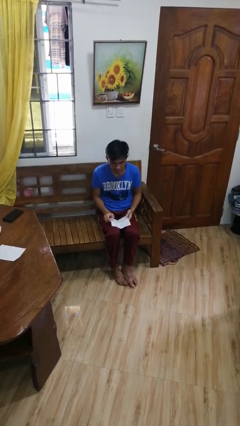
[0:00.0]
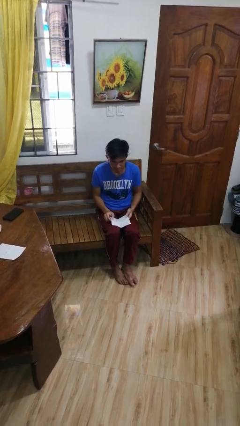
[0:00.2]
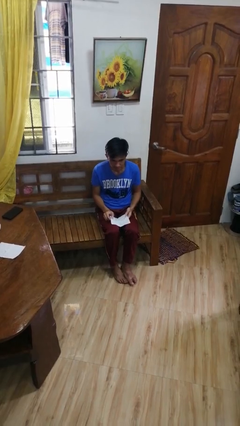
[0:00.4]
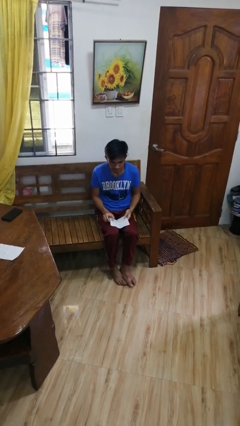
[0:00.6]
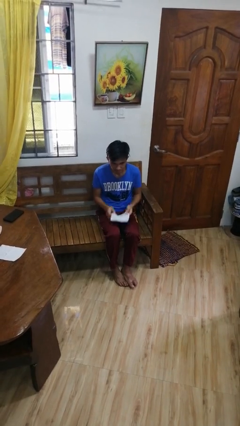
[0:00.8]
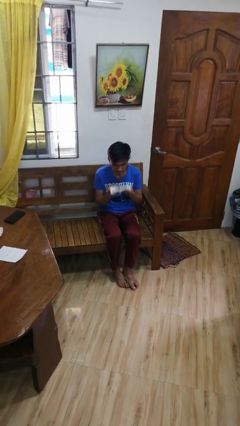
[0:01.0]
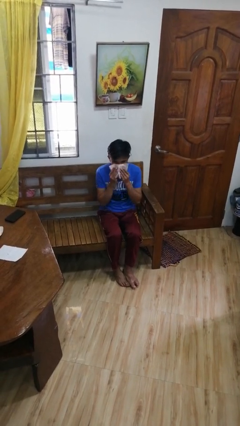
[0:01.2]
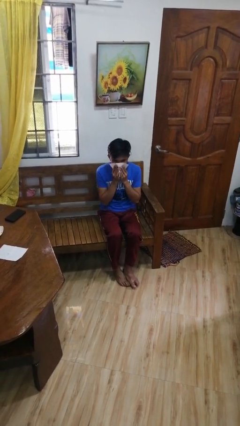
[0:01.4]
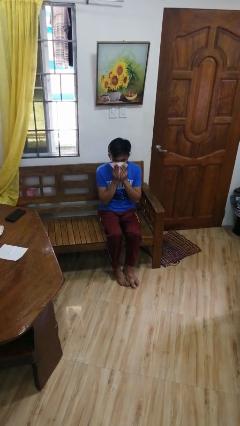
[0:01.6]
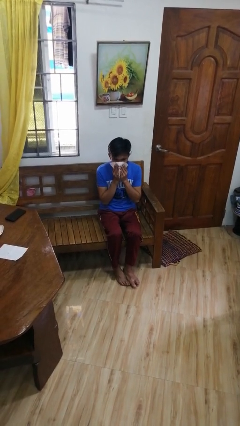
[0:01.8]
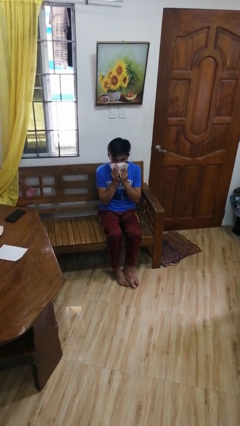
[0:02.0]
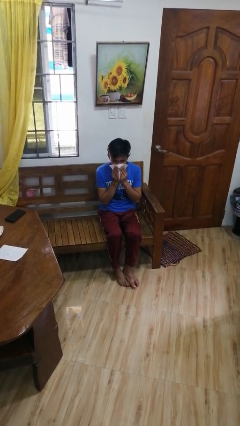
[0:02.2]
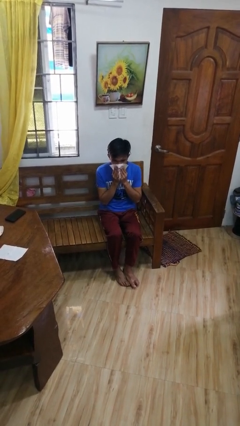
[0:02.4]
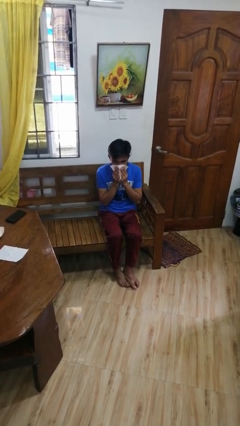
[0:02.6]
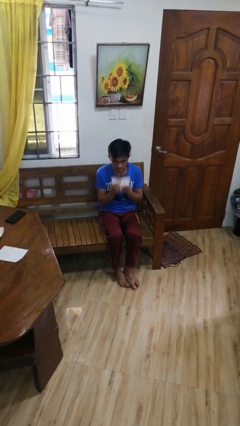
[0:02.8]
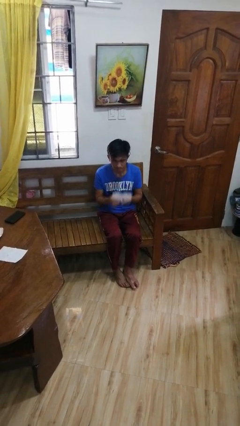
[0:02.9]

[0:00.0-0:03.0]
person wipes mouth with napkin

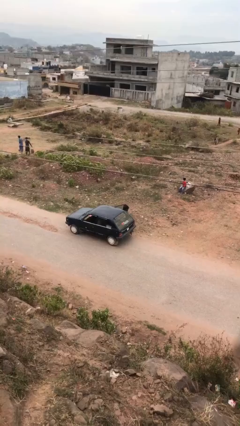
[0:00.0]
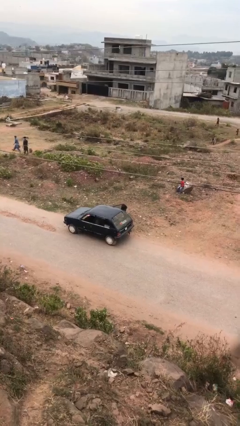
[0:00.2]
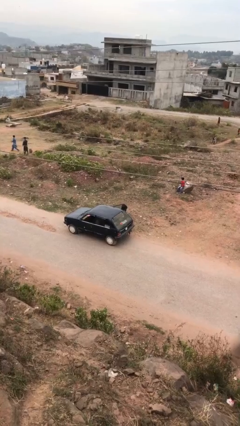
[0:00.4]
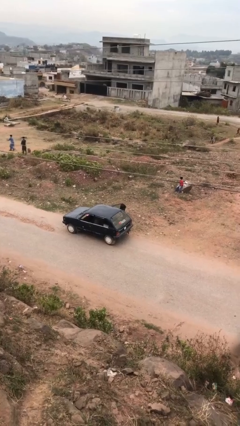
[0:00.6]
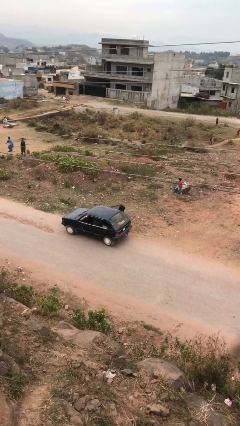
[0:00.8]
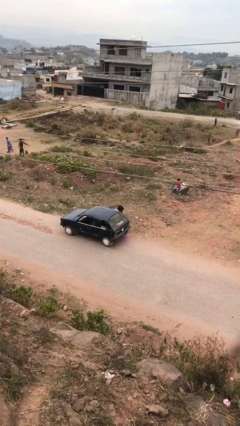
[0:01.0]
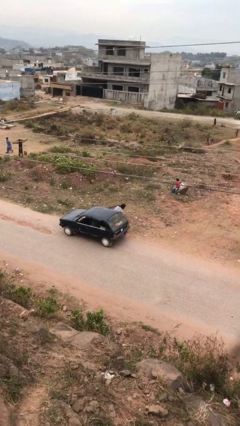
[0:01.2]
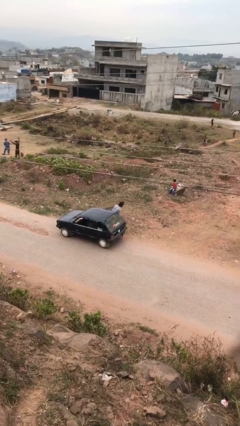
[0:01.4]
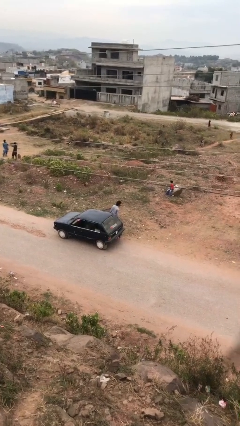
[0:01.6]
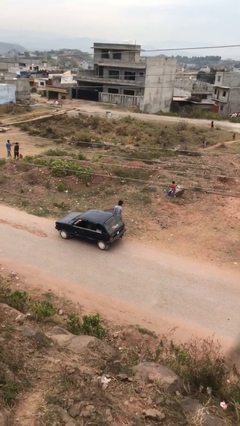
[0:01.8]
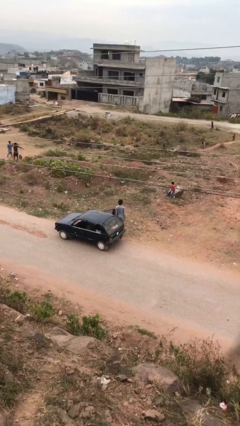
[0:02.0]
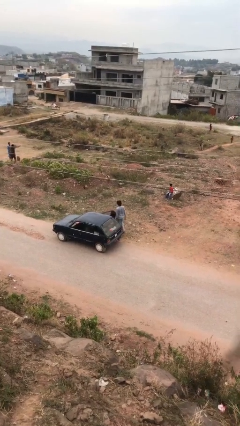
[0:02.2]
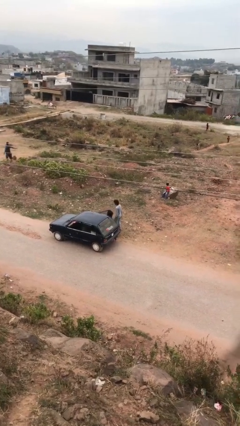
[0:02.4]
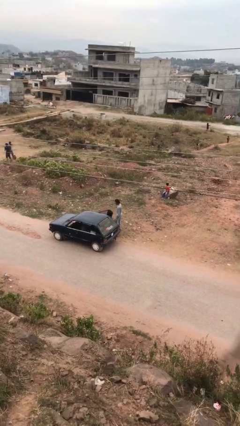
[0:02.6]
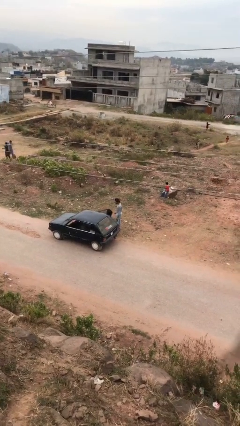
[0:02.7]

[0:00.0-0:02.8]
person exits car

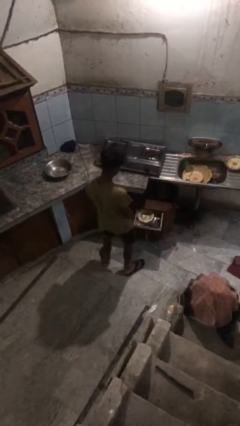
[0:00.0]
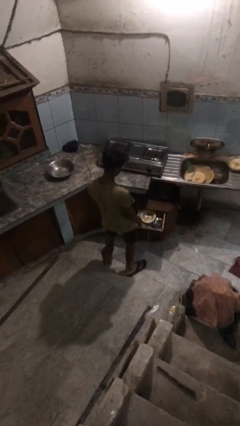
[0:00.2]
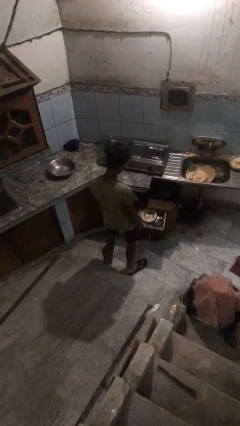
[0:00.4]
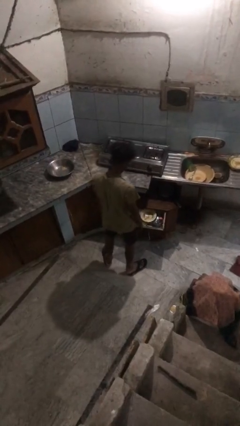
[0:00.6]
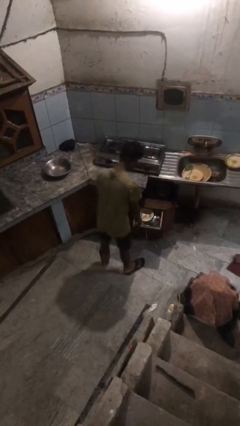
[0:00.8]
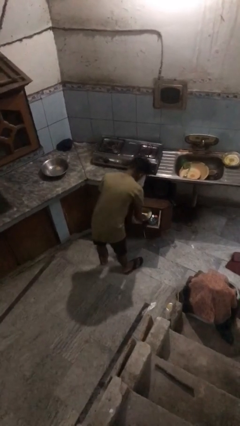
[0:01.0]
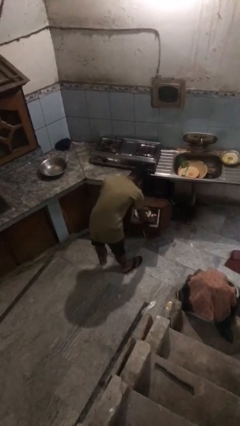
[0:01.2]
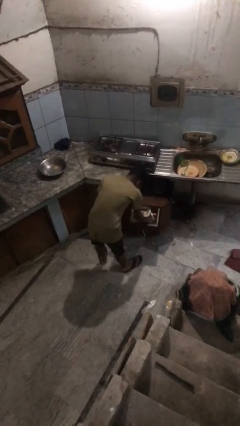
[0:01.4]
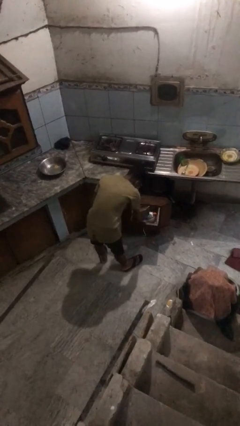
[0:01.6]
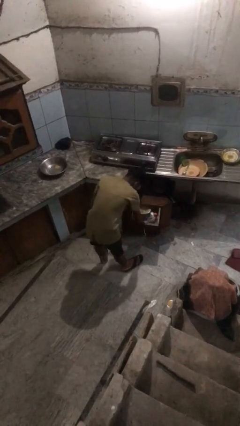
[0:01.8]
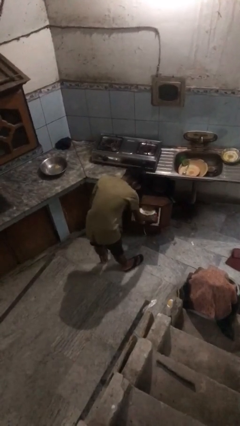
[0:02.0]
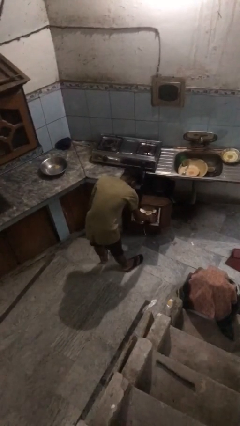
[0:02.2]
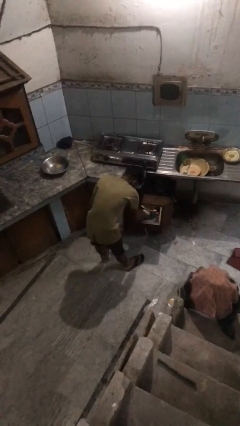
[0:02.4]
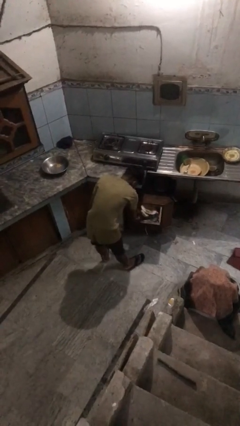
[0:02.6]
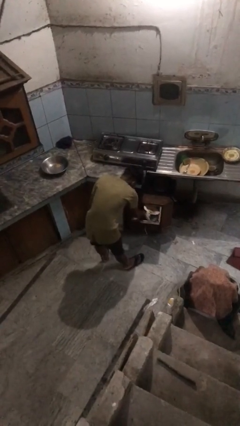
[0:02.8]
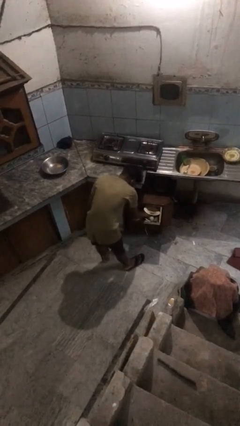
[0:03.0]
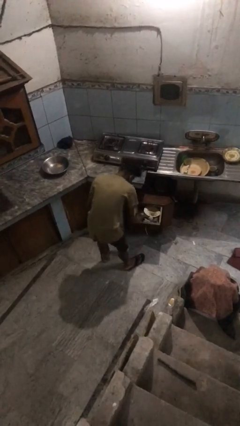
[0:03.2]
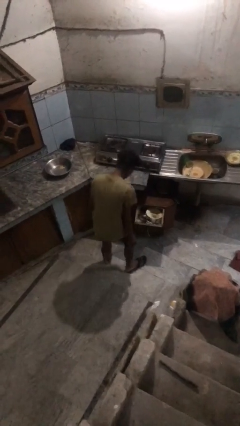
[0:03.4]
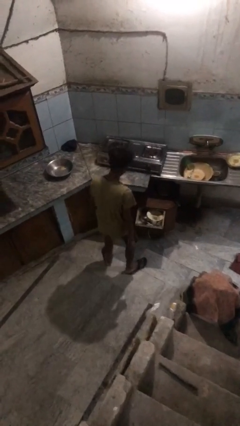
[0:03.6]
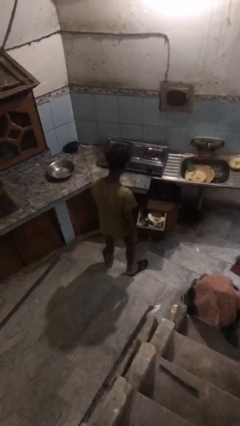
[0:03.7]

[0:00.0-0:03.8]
person searches in kitchen drawer

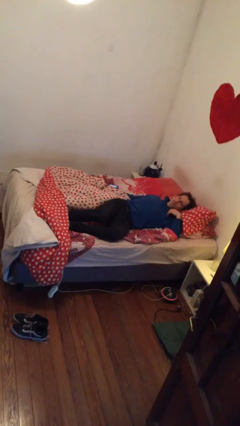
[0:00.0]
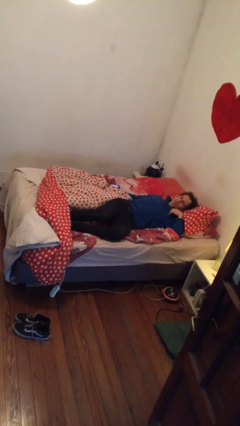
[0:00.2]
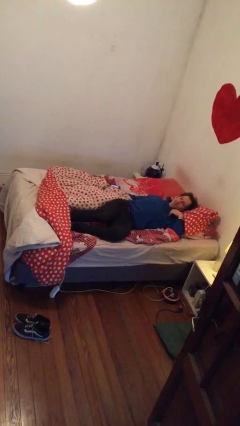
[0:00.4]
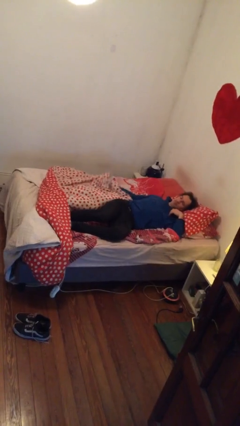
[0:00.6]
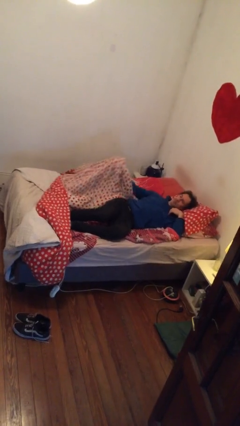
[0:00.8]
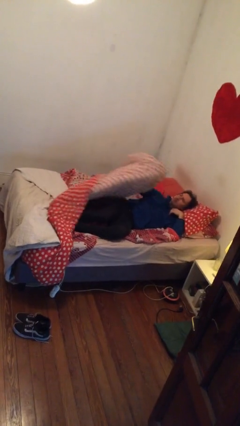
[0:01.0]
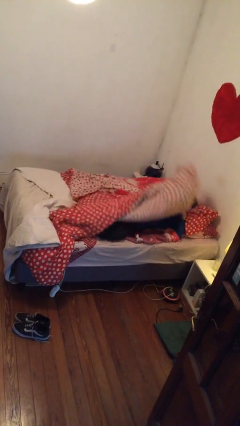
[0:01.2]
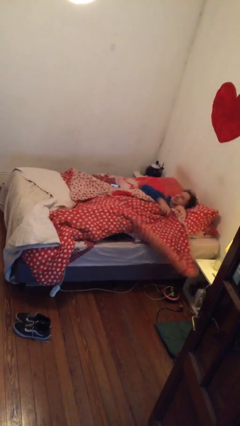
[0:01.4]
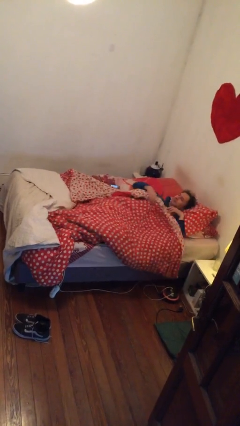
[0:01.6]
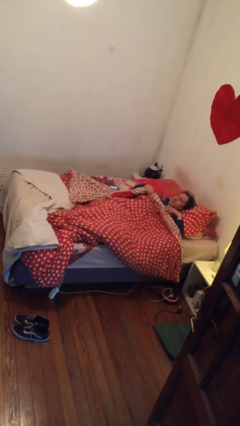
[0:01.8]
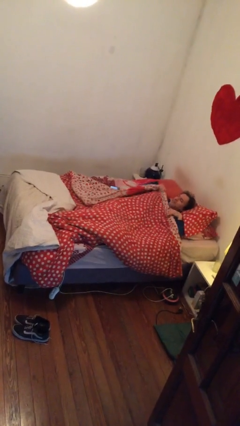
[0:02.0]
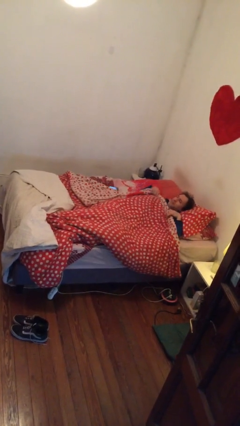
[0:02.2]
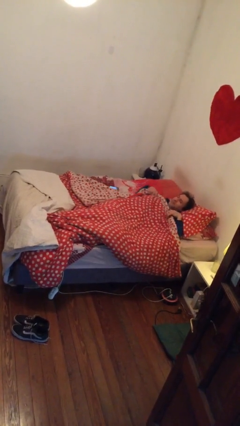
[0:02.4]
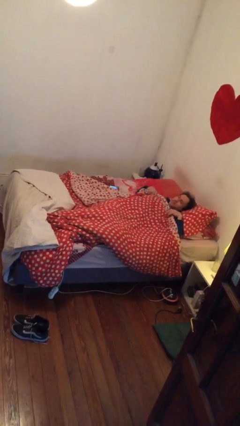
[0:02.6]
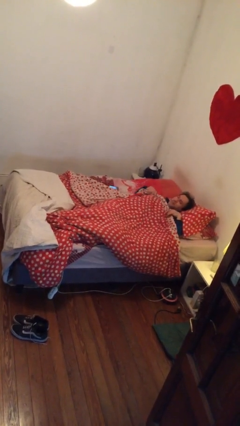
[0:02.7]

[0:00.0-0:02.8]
person covers with bedsheets

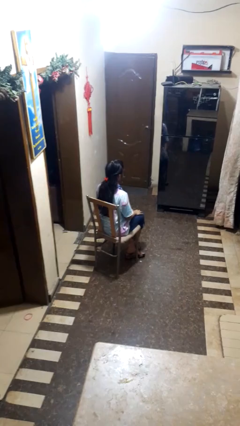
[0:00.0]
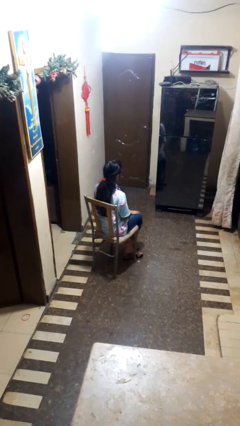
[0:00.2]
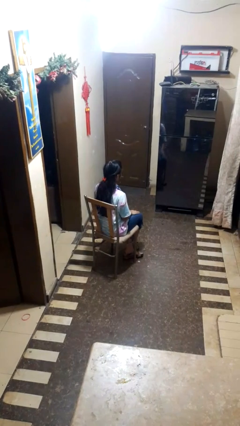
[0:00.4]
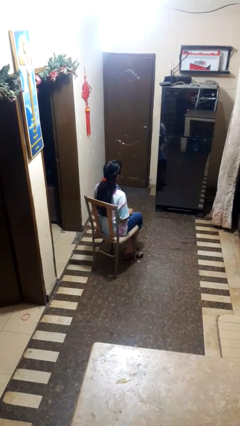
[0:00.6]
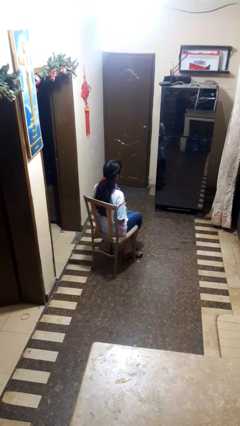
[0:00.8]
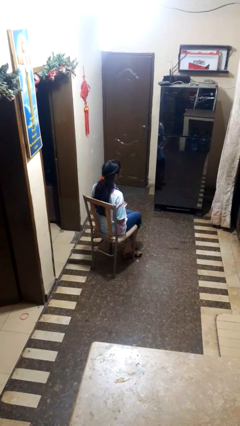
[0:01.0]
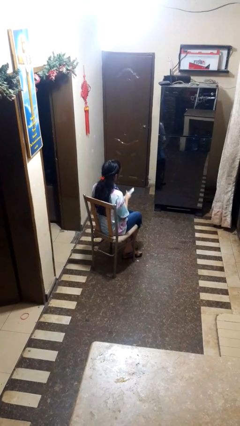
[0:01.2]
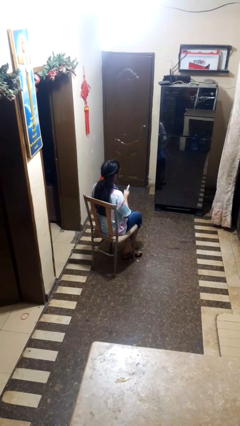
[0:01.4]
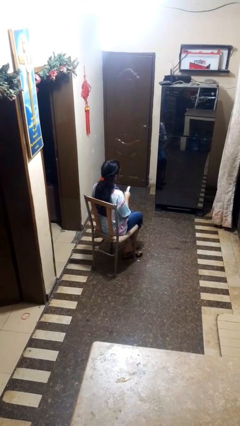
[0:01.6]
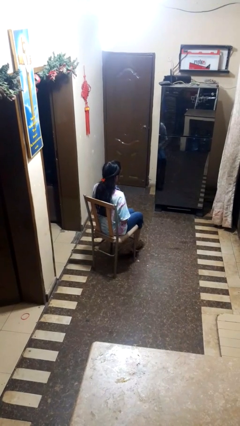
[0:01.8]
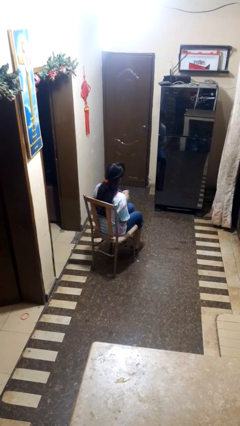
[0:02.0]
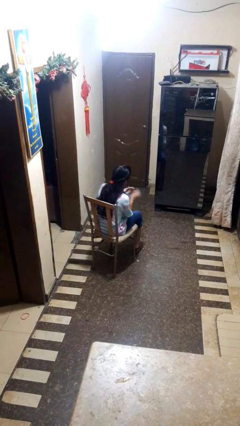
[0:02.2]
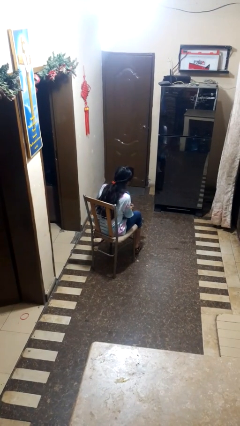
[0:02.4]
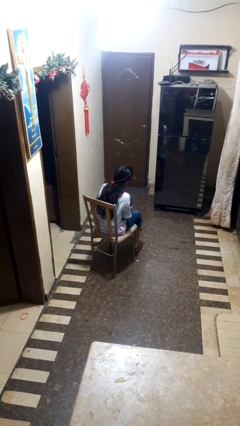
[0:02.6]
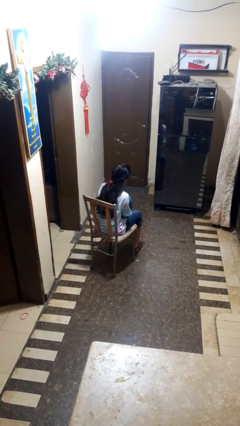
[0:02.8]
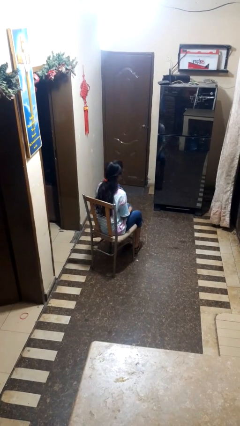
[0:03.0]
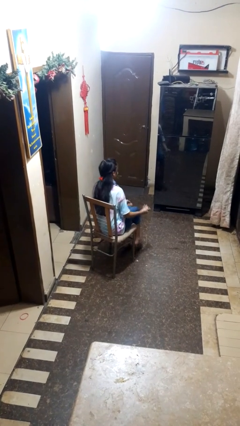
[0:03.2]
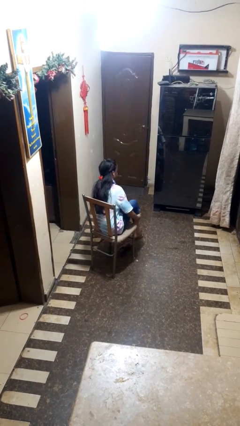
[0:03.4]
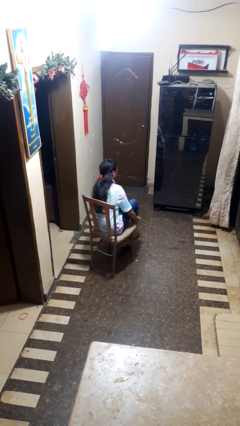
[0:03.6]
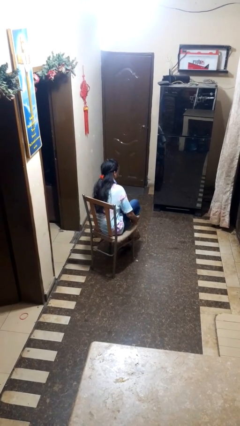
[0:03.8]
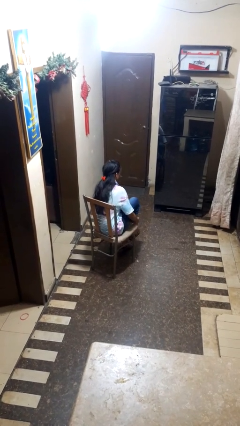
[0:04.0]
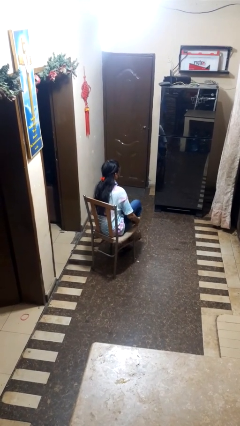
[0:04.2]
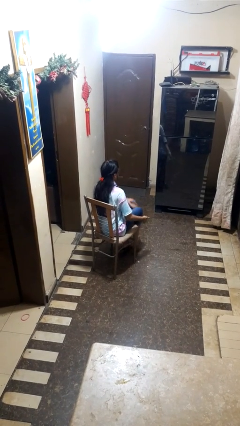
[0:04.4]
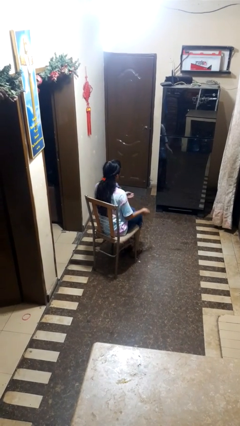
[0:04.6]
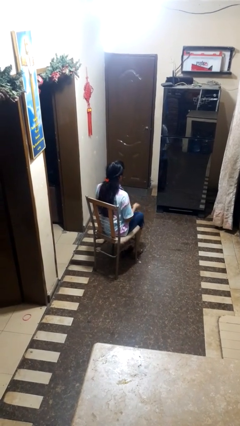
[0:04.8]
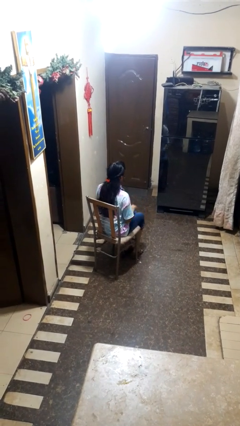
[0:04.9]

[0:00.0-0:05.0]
person applies sunscreen
